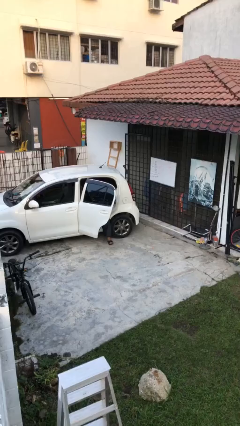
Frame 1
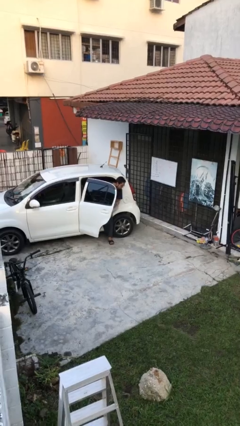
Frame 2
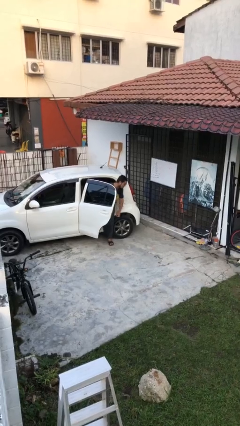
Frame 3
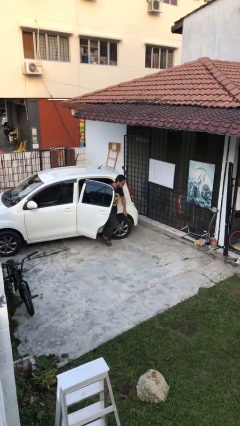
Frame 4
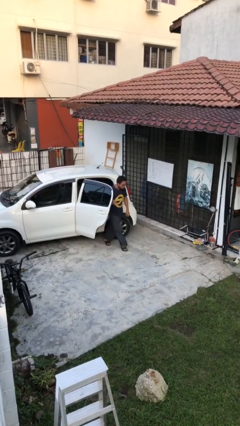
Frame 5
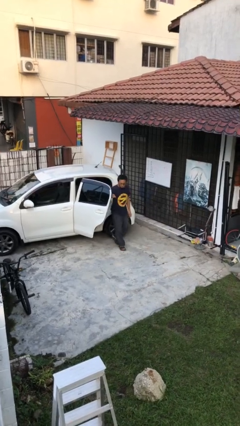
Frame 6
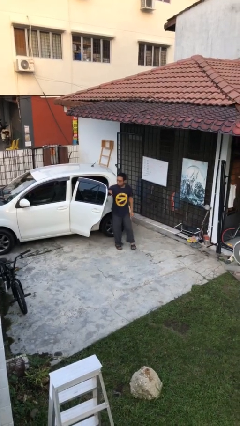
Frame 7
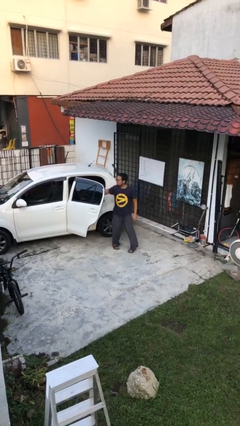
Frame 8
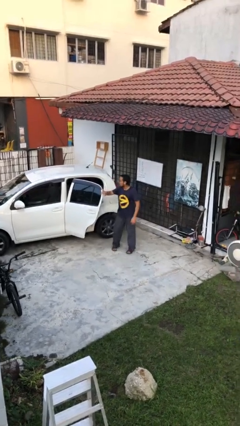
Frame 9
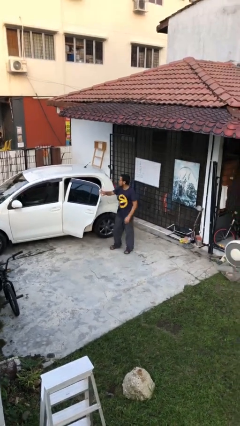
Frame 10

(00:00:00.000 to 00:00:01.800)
person exits car

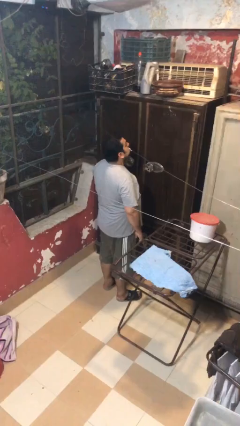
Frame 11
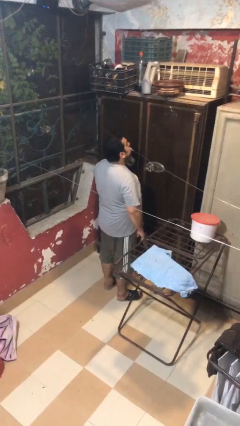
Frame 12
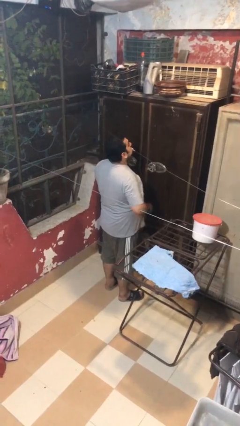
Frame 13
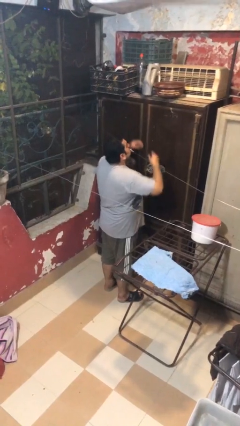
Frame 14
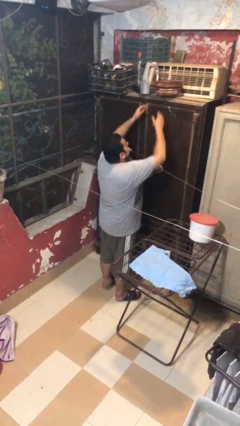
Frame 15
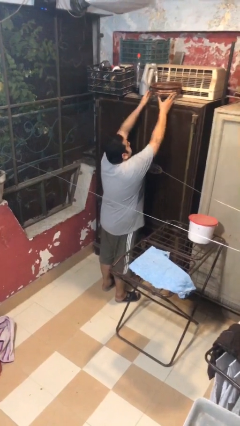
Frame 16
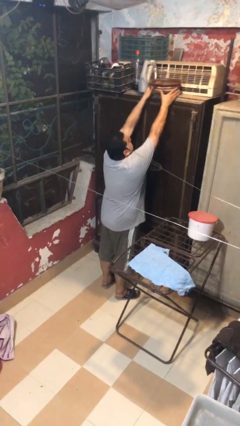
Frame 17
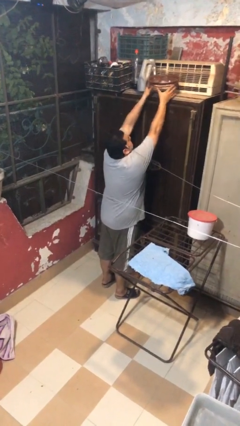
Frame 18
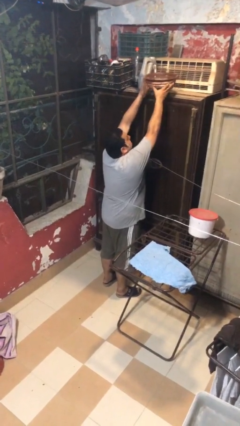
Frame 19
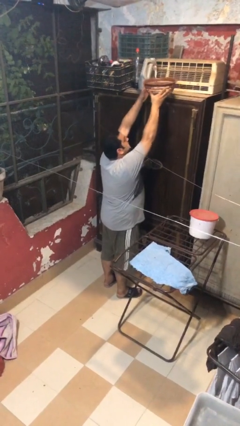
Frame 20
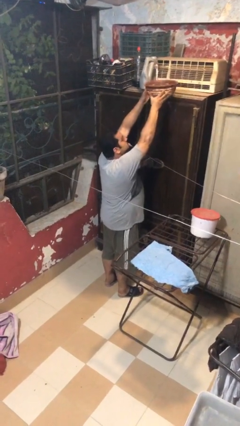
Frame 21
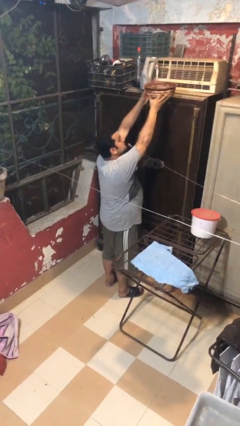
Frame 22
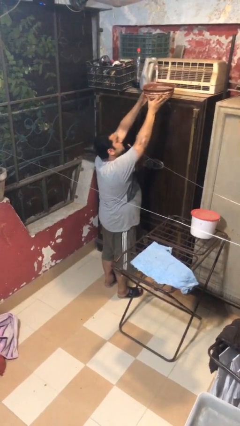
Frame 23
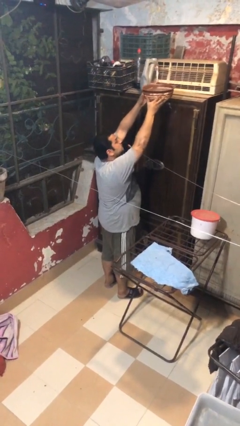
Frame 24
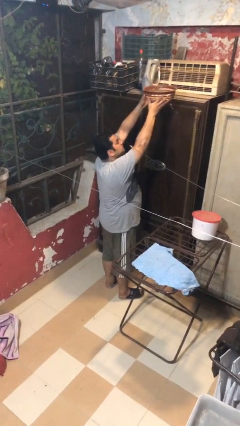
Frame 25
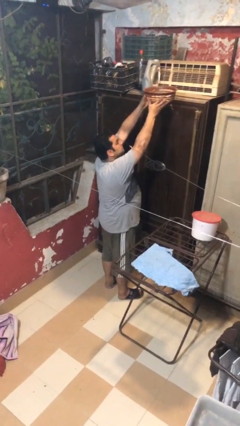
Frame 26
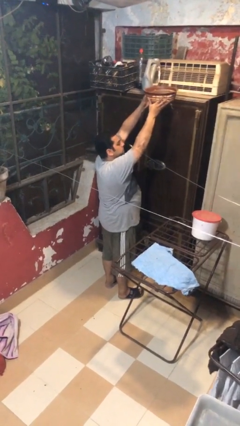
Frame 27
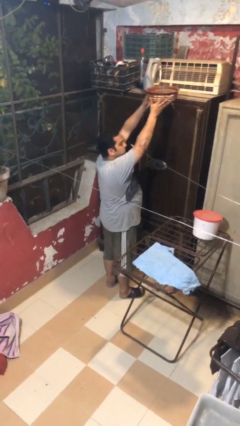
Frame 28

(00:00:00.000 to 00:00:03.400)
person picks up object from shelf

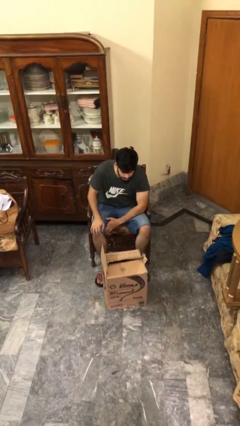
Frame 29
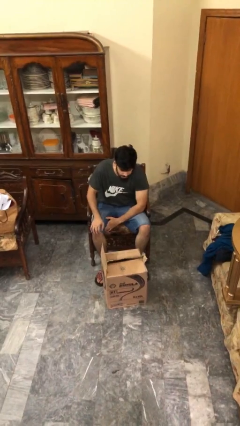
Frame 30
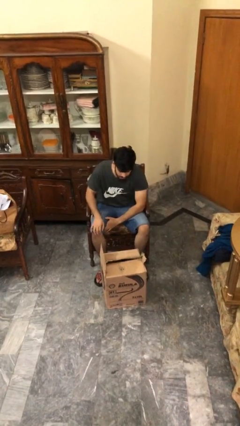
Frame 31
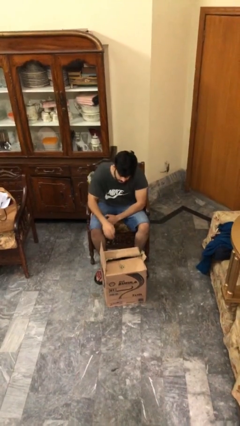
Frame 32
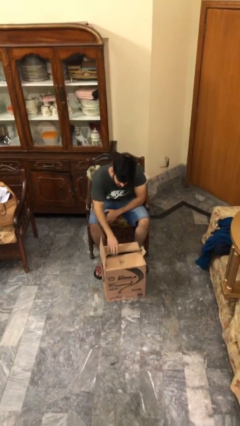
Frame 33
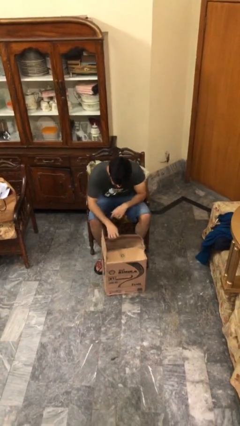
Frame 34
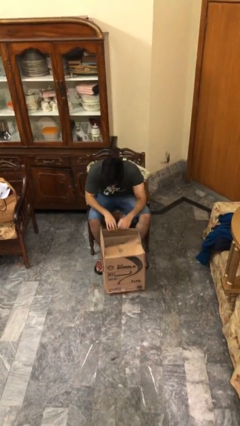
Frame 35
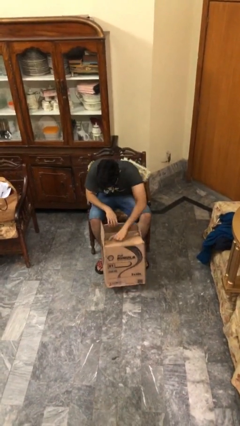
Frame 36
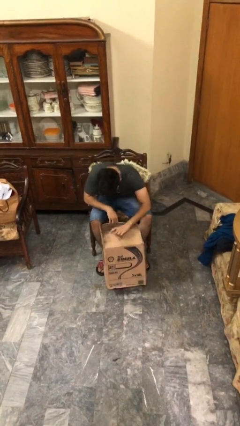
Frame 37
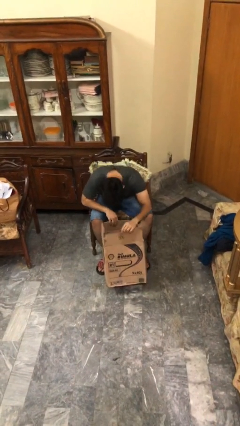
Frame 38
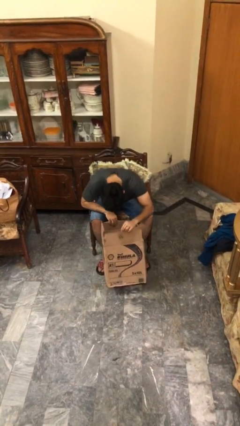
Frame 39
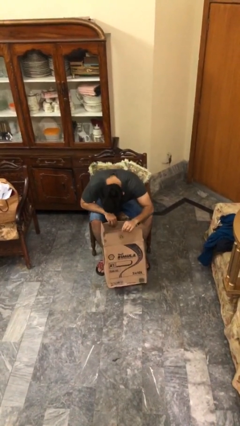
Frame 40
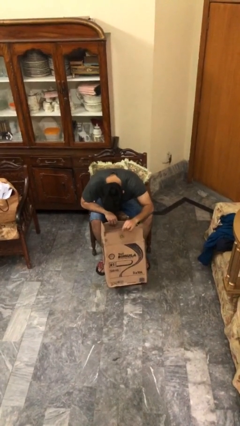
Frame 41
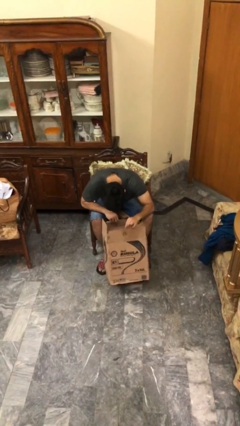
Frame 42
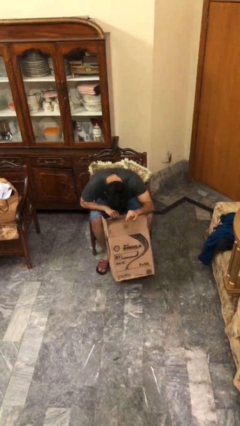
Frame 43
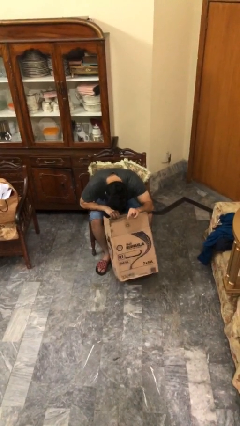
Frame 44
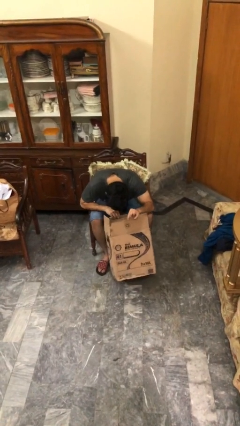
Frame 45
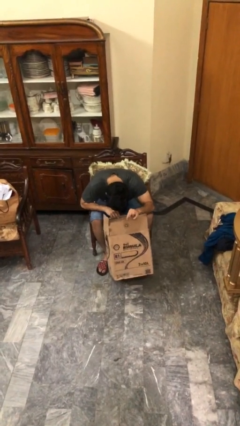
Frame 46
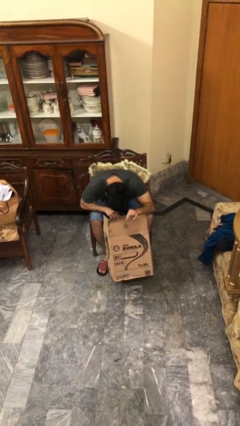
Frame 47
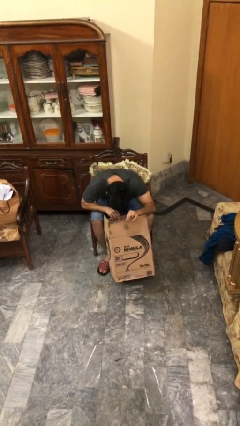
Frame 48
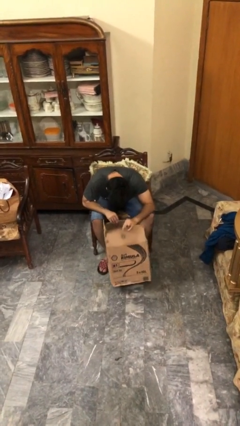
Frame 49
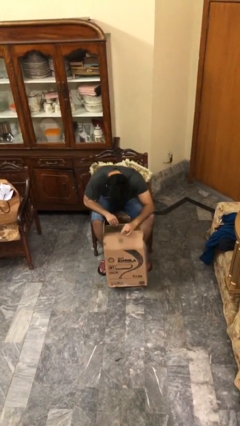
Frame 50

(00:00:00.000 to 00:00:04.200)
person searches in box

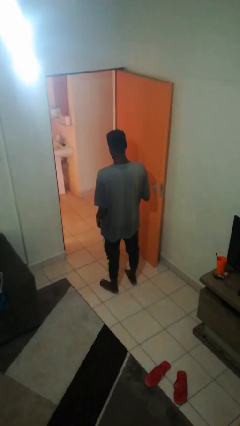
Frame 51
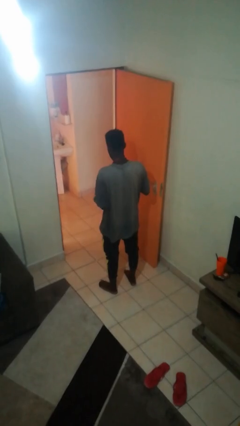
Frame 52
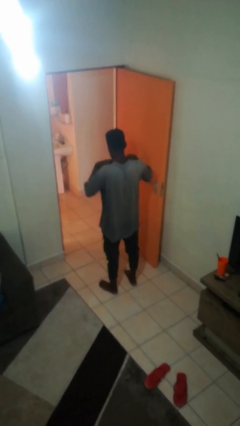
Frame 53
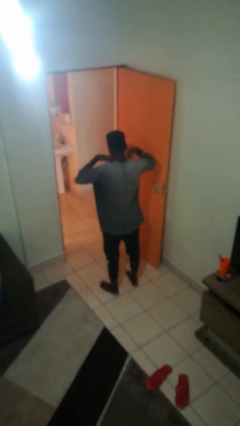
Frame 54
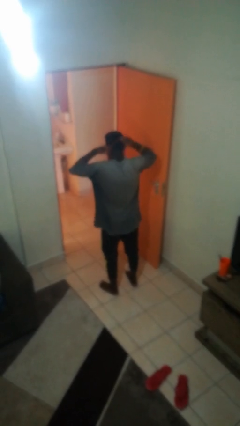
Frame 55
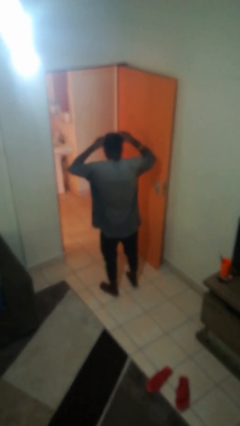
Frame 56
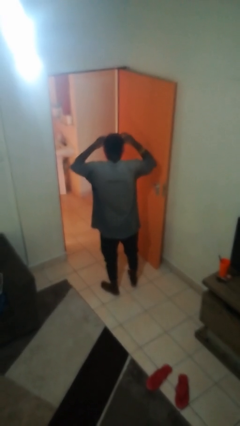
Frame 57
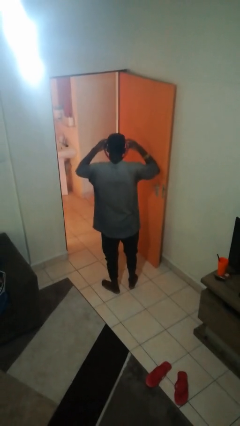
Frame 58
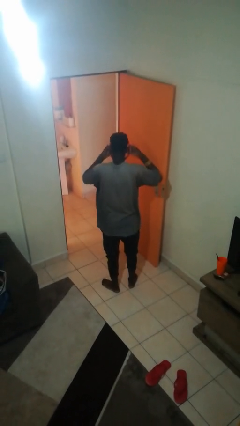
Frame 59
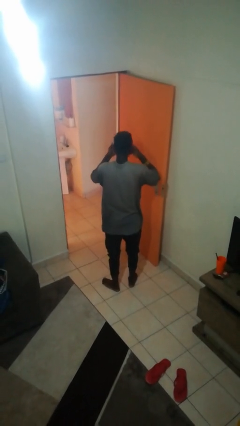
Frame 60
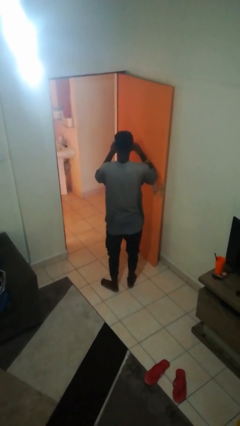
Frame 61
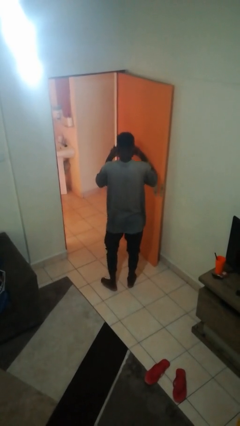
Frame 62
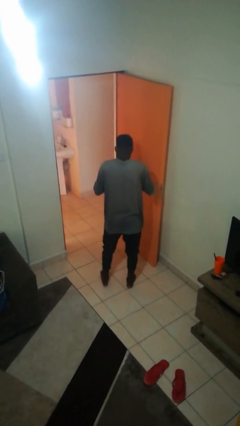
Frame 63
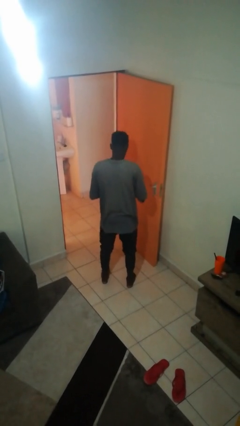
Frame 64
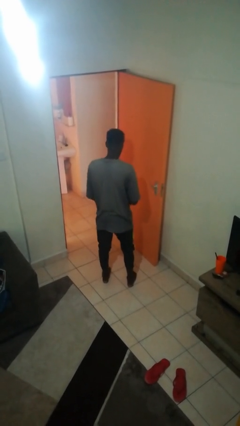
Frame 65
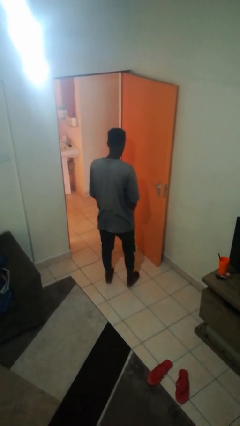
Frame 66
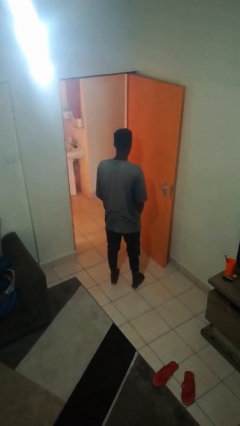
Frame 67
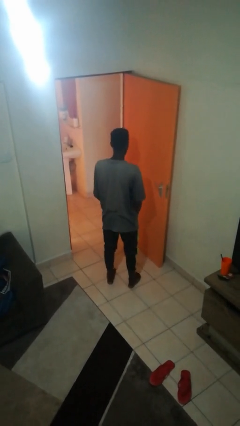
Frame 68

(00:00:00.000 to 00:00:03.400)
person takes off necklace

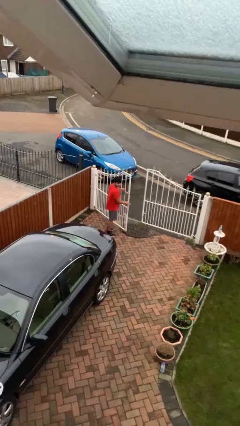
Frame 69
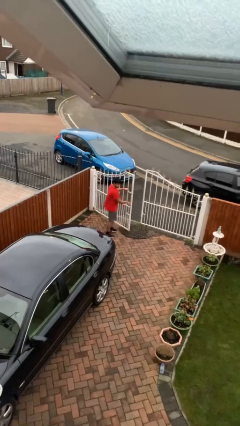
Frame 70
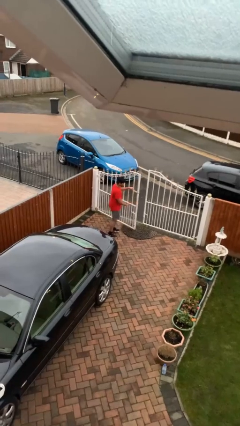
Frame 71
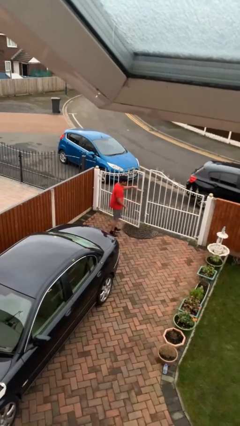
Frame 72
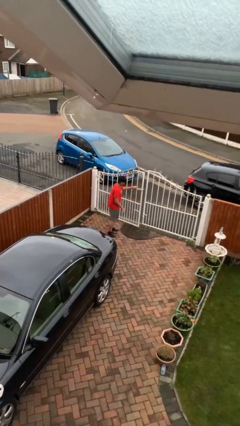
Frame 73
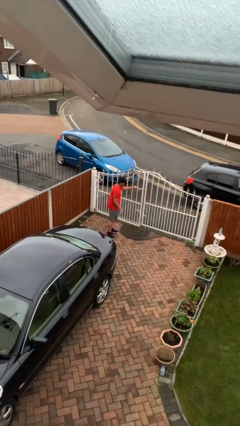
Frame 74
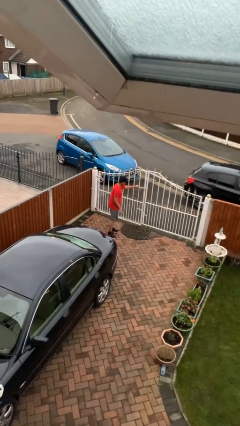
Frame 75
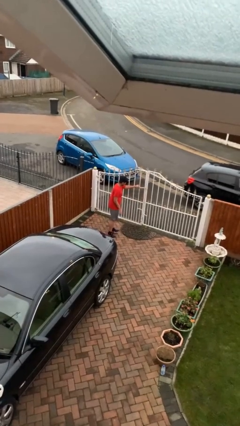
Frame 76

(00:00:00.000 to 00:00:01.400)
person closes facility door

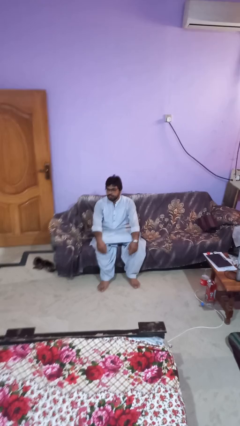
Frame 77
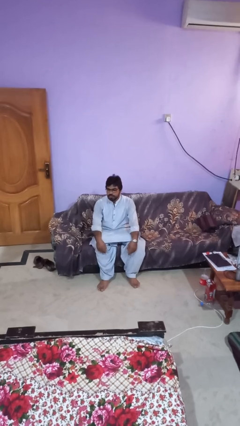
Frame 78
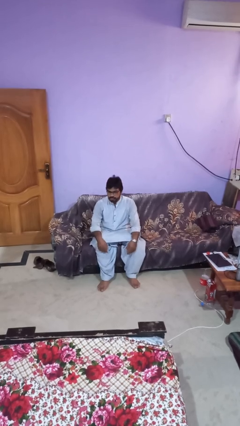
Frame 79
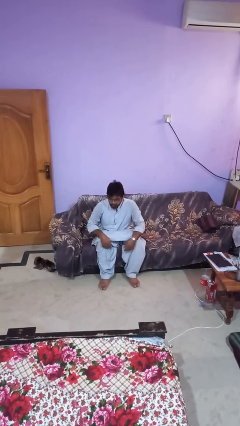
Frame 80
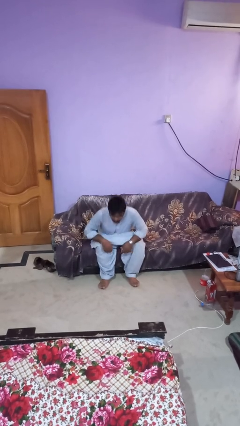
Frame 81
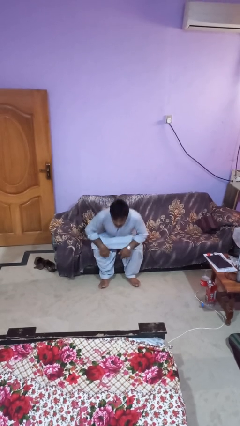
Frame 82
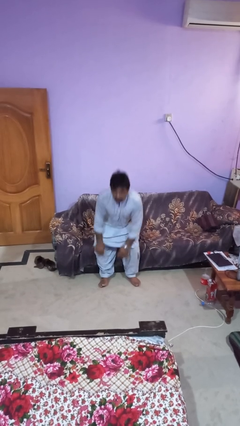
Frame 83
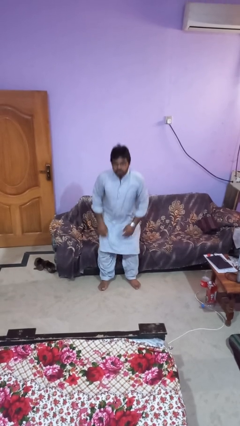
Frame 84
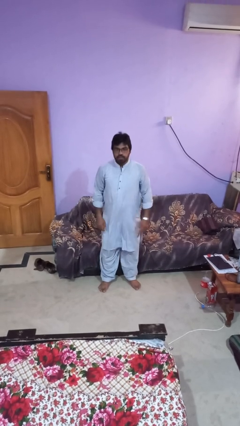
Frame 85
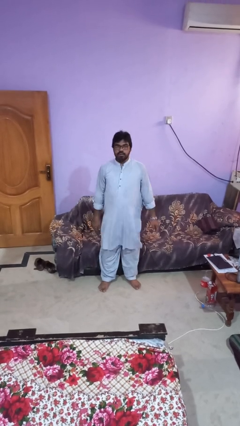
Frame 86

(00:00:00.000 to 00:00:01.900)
person stands up

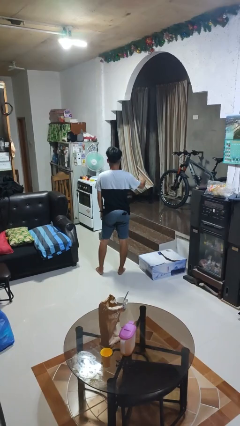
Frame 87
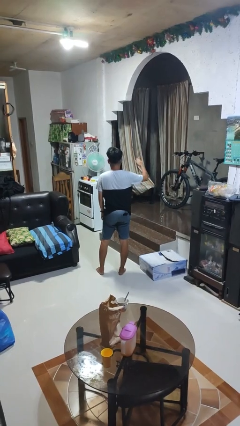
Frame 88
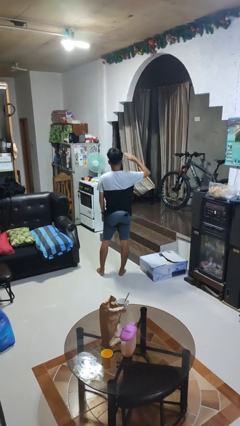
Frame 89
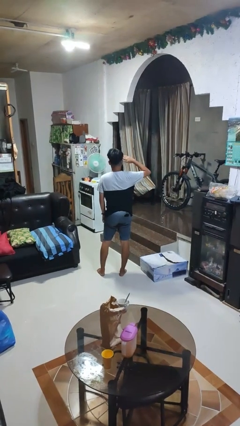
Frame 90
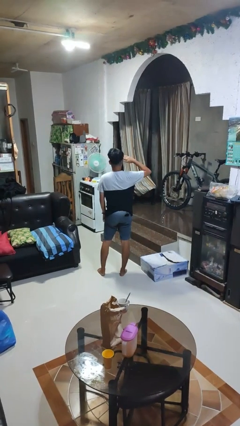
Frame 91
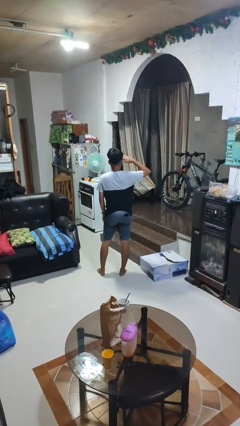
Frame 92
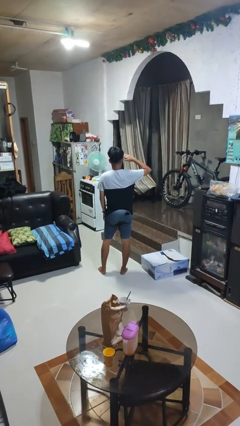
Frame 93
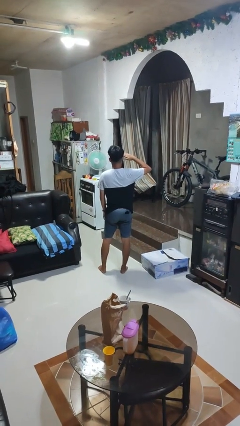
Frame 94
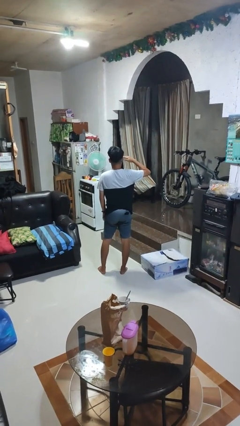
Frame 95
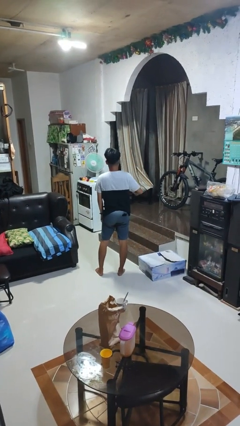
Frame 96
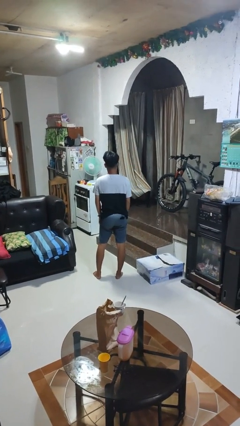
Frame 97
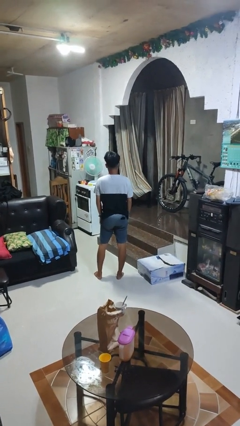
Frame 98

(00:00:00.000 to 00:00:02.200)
person salutes
